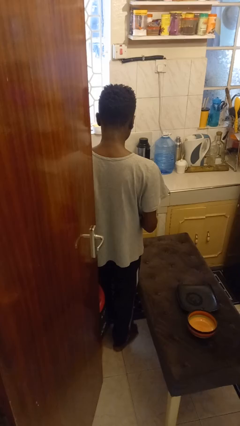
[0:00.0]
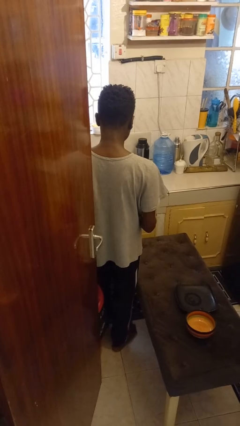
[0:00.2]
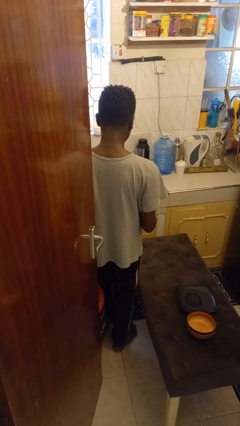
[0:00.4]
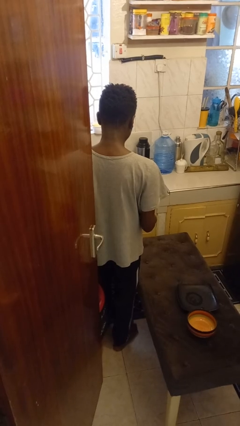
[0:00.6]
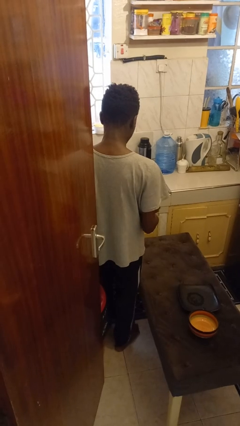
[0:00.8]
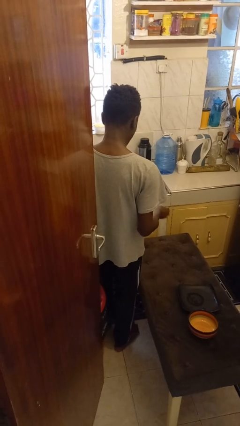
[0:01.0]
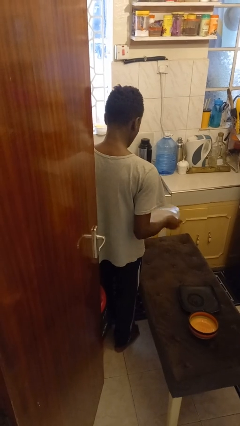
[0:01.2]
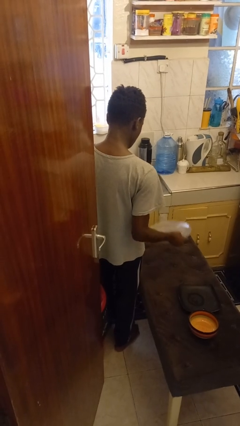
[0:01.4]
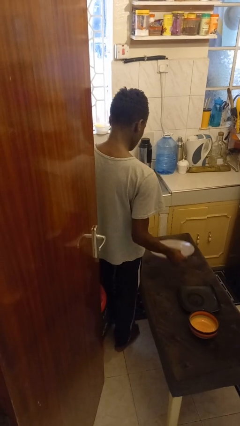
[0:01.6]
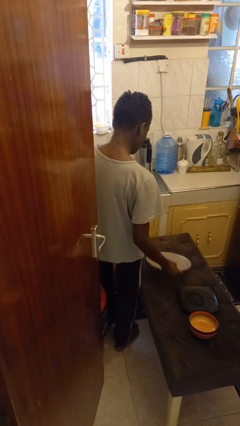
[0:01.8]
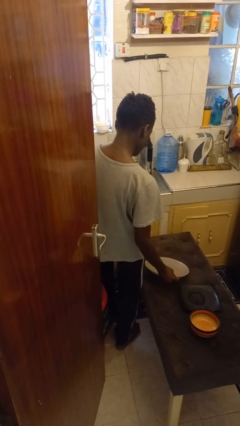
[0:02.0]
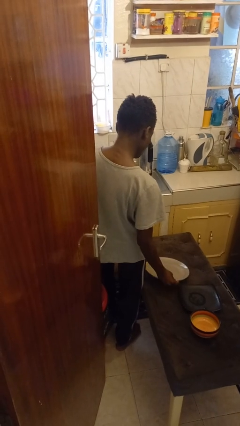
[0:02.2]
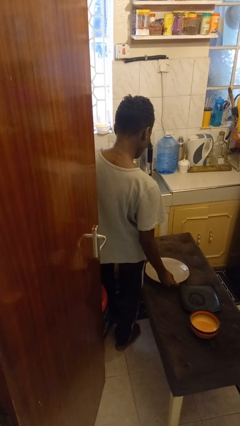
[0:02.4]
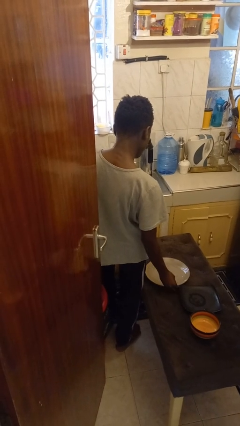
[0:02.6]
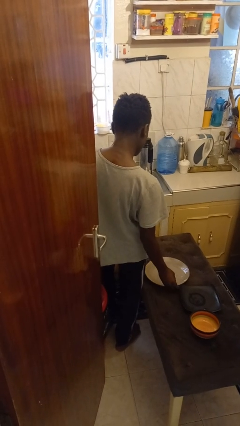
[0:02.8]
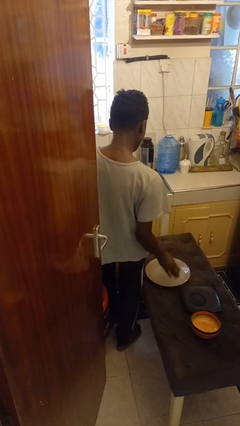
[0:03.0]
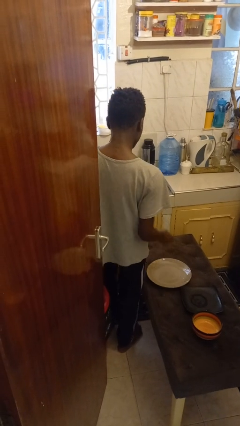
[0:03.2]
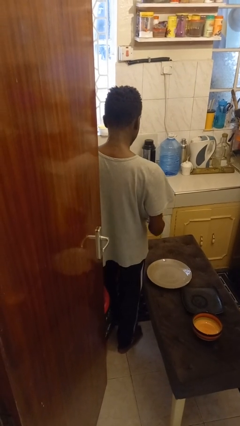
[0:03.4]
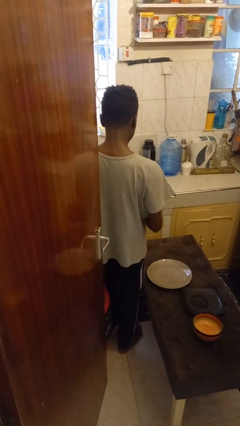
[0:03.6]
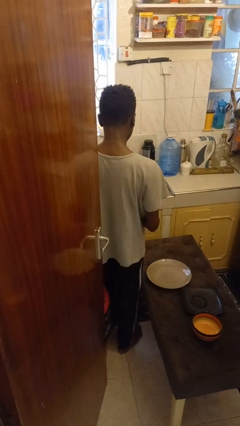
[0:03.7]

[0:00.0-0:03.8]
person sets table

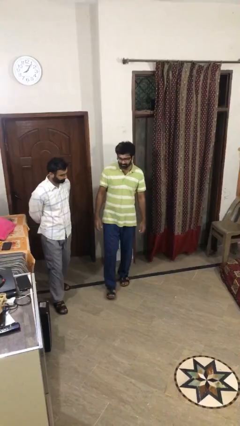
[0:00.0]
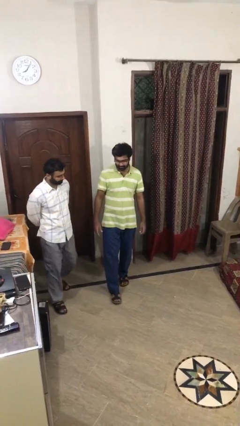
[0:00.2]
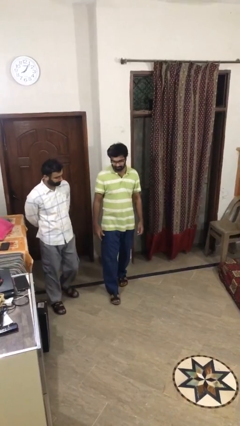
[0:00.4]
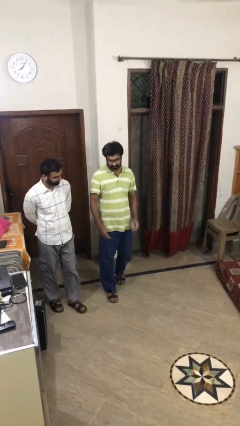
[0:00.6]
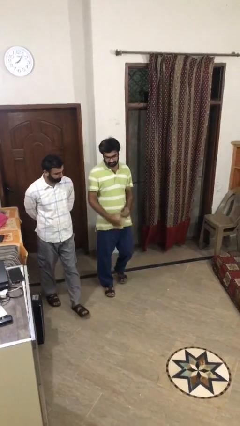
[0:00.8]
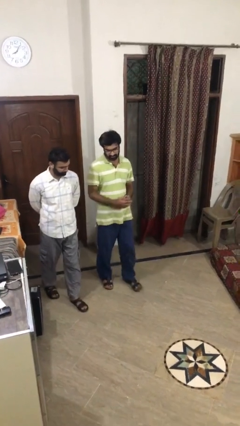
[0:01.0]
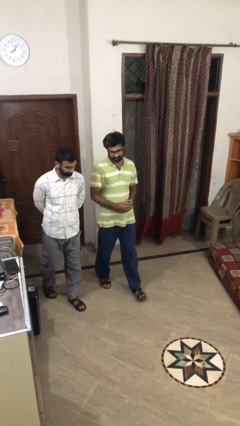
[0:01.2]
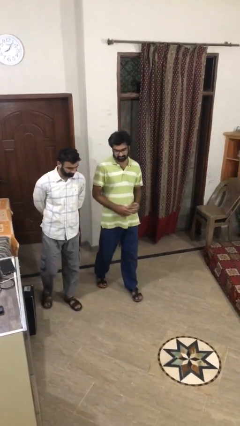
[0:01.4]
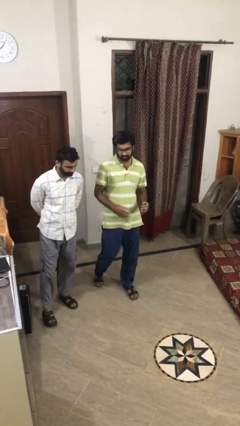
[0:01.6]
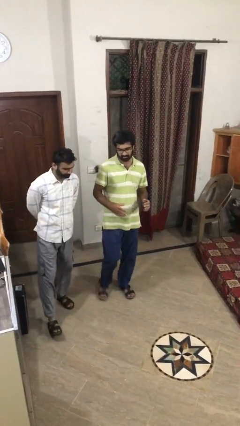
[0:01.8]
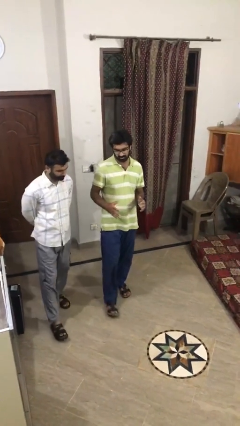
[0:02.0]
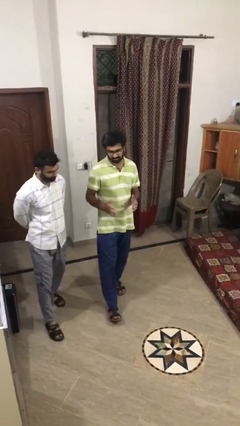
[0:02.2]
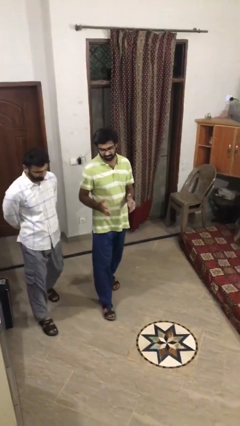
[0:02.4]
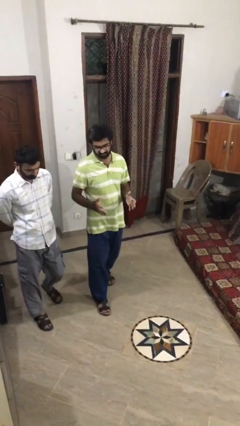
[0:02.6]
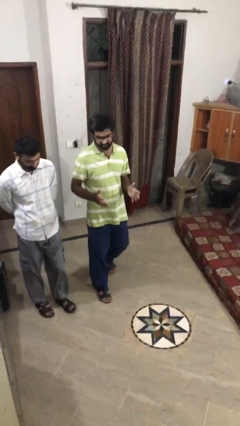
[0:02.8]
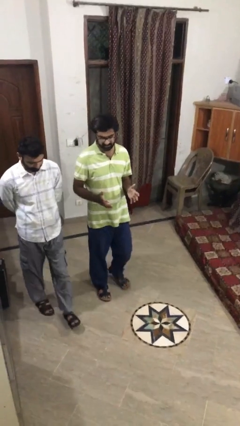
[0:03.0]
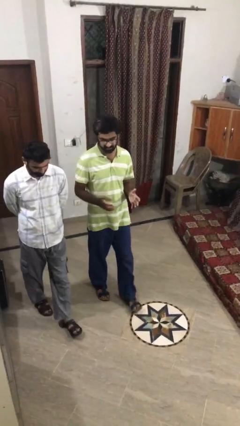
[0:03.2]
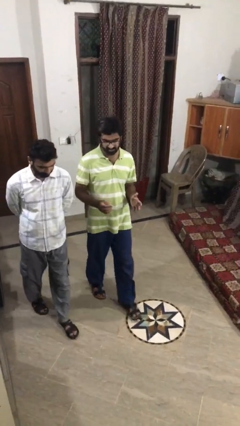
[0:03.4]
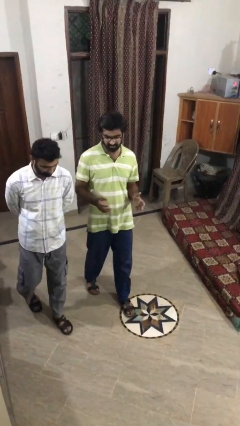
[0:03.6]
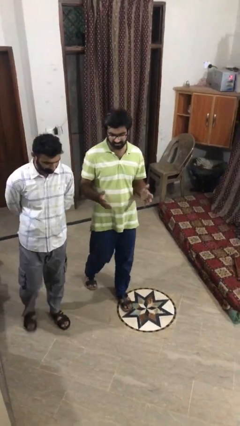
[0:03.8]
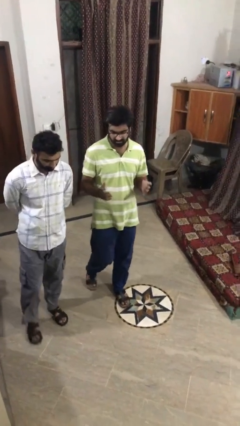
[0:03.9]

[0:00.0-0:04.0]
person talks to person

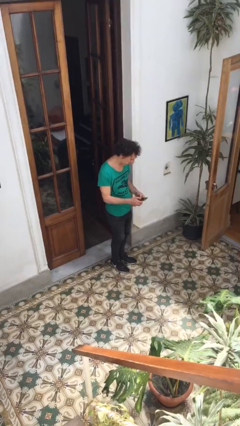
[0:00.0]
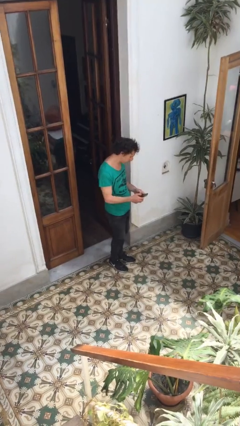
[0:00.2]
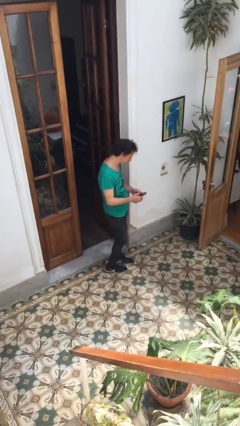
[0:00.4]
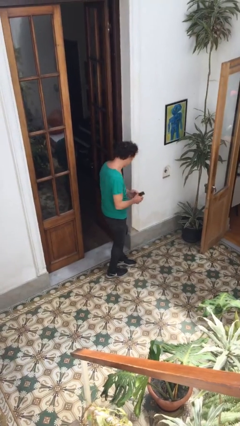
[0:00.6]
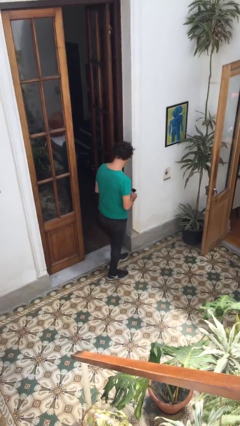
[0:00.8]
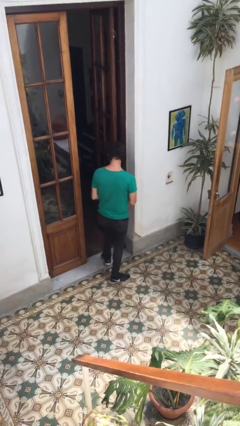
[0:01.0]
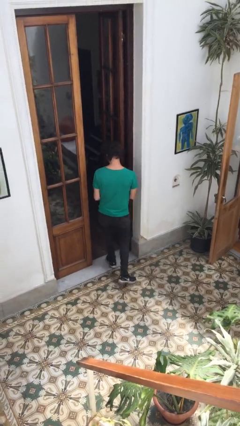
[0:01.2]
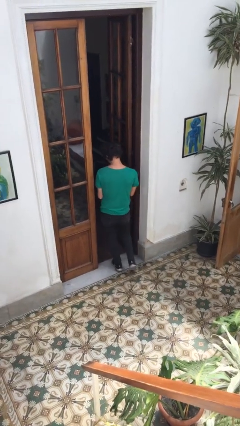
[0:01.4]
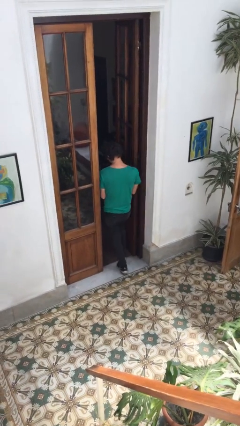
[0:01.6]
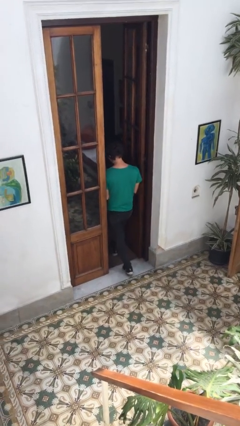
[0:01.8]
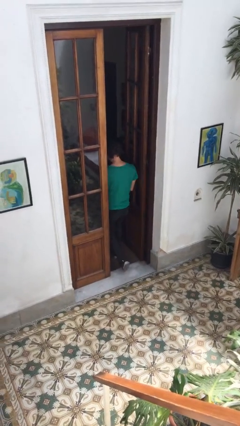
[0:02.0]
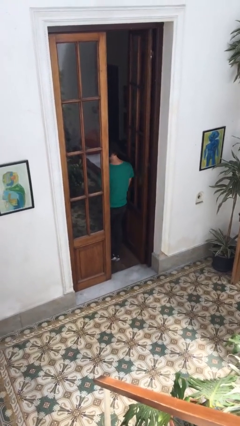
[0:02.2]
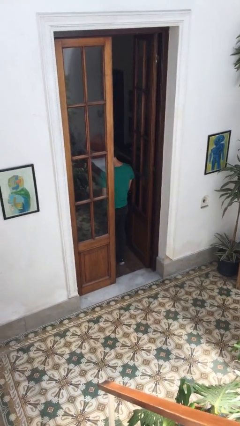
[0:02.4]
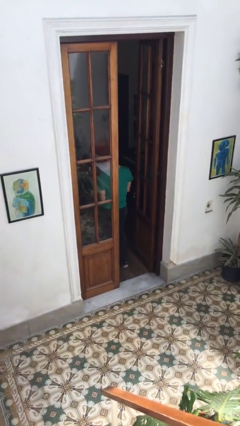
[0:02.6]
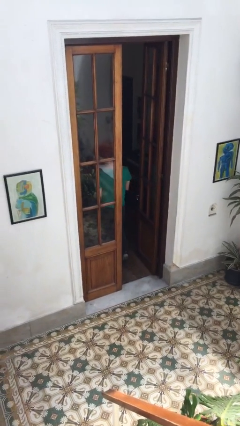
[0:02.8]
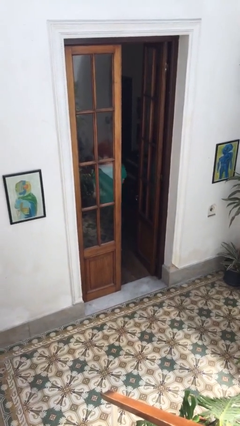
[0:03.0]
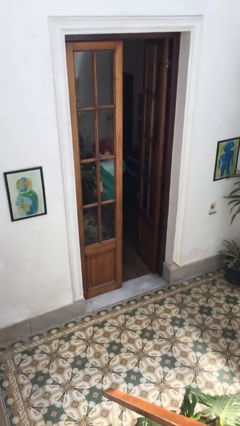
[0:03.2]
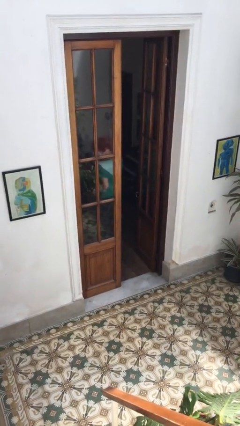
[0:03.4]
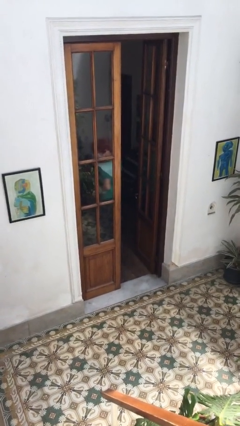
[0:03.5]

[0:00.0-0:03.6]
person exits scene through structure

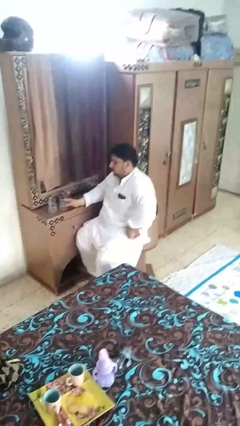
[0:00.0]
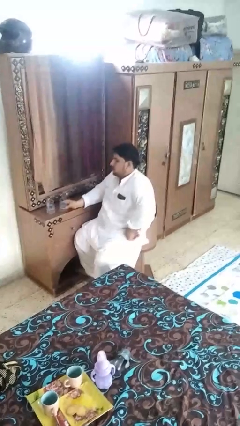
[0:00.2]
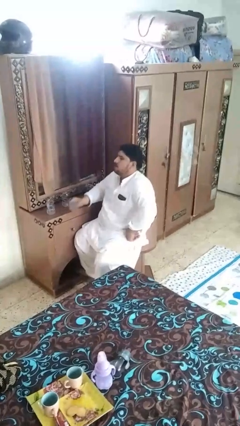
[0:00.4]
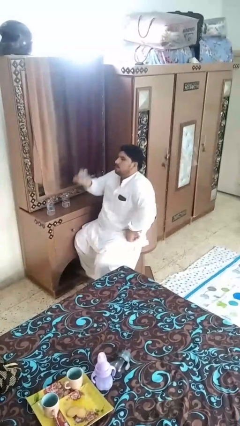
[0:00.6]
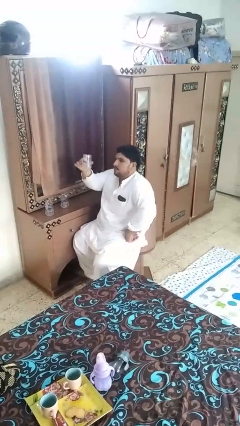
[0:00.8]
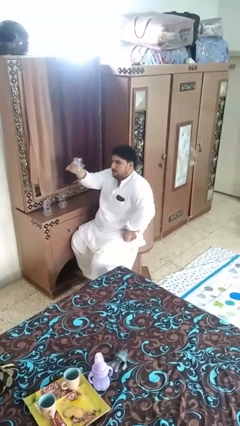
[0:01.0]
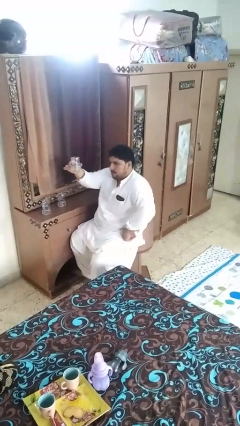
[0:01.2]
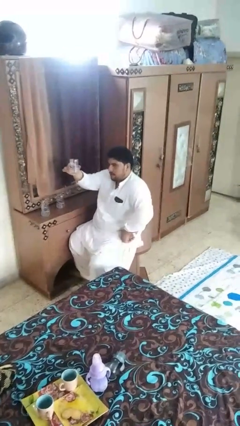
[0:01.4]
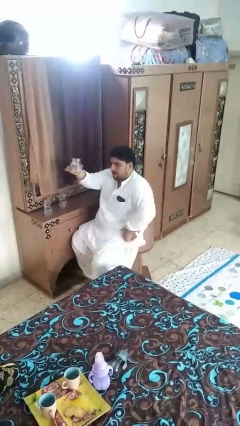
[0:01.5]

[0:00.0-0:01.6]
person picks up object from table

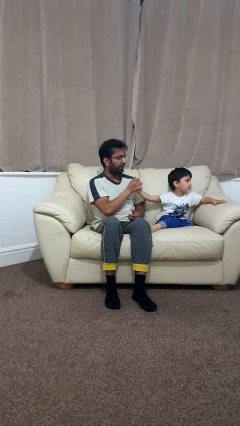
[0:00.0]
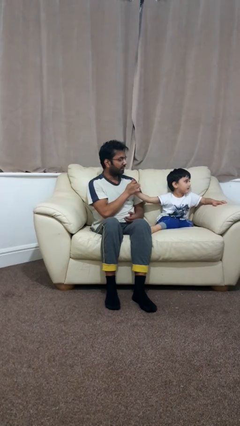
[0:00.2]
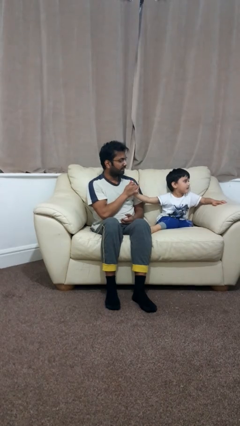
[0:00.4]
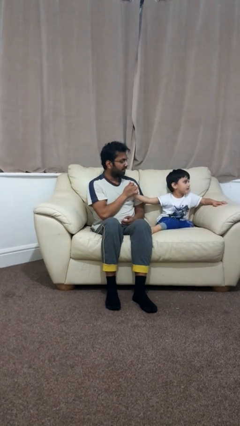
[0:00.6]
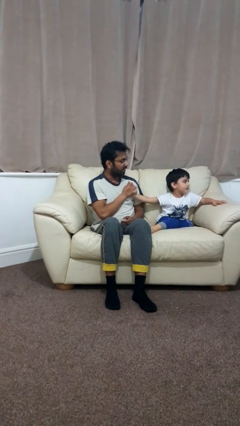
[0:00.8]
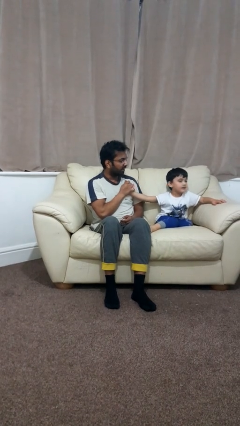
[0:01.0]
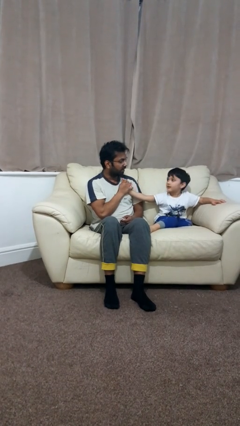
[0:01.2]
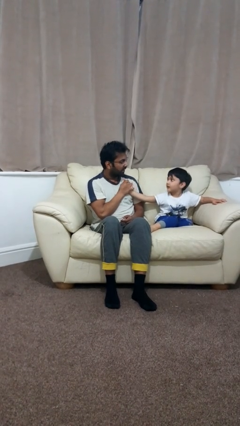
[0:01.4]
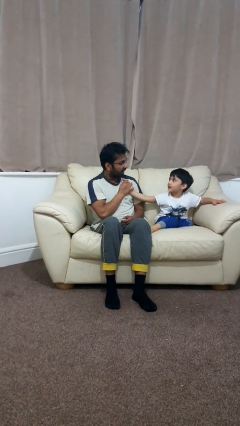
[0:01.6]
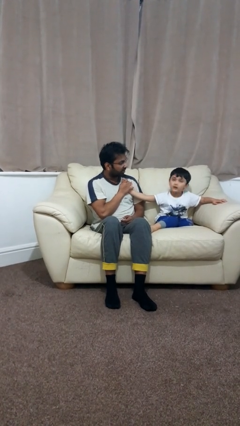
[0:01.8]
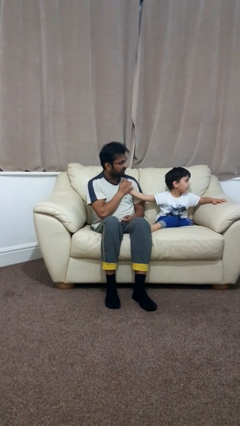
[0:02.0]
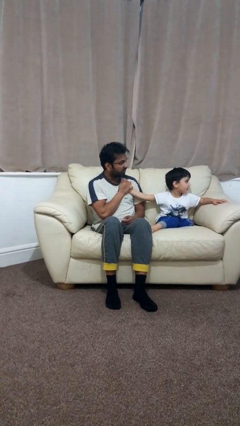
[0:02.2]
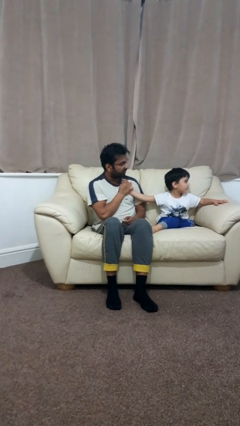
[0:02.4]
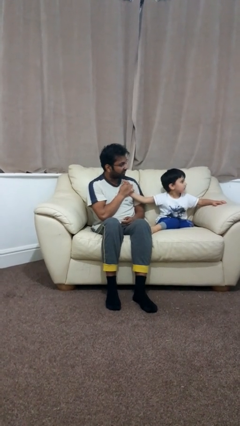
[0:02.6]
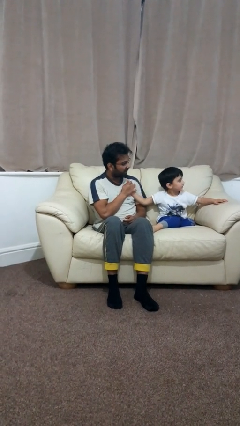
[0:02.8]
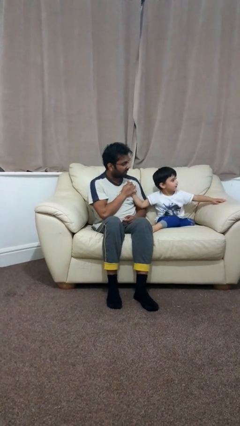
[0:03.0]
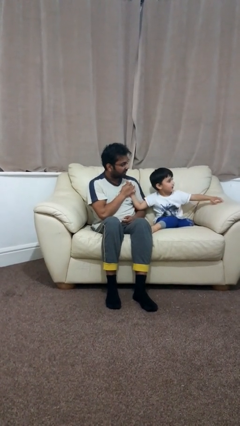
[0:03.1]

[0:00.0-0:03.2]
person highfives hand

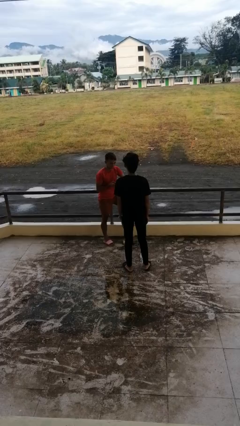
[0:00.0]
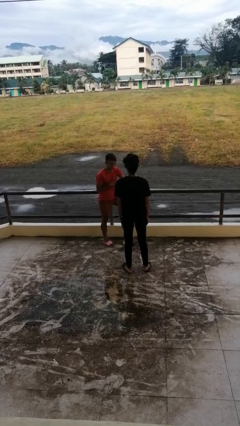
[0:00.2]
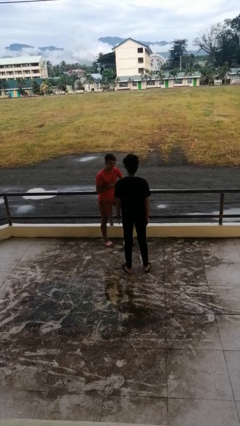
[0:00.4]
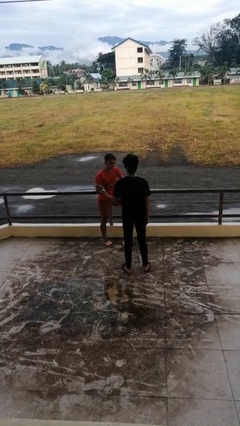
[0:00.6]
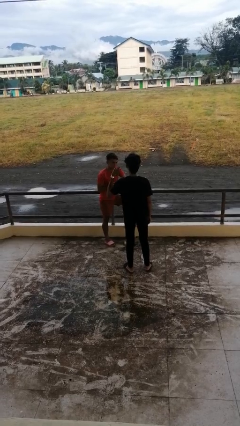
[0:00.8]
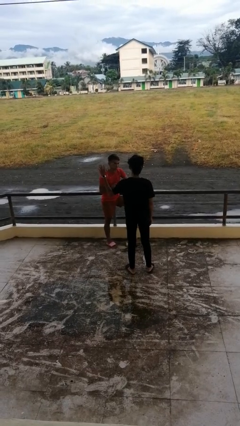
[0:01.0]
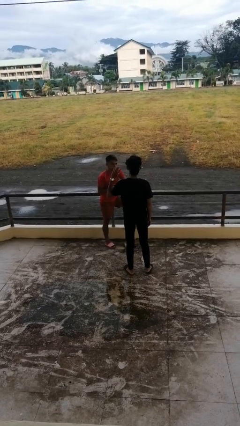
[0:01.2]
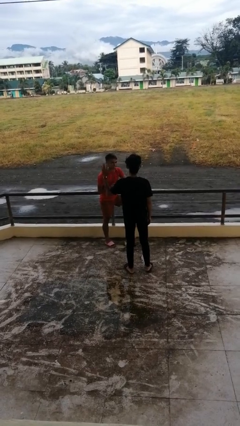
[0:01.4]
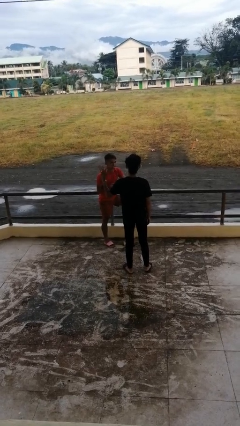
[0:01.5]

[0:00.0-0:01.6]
person waves at person
